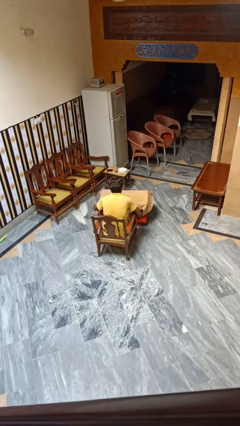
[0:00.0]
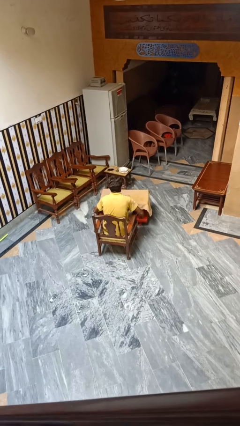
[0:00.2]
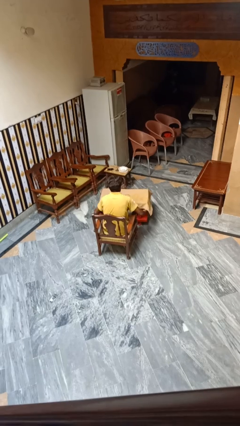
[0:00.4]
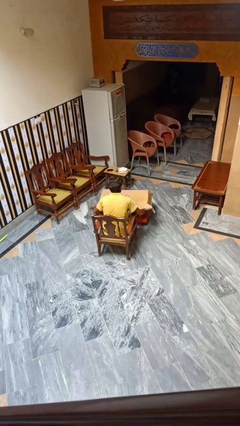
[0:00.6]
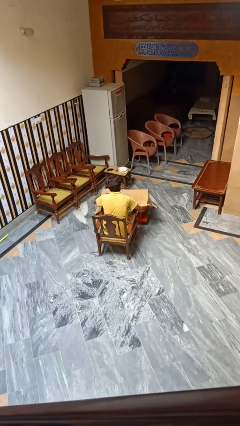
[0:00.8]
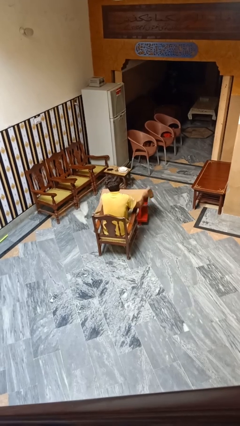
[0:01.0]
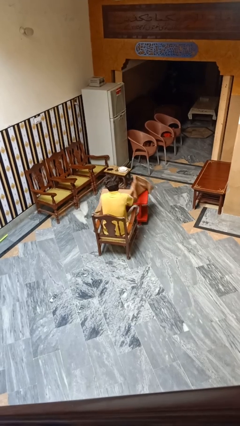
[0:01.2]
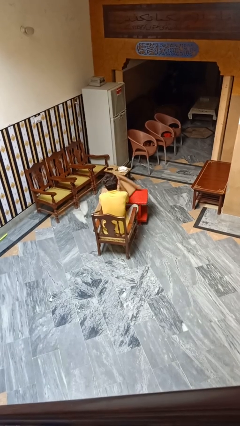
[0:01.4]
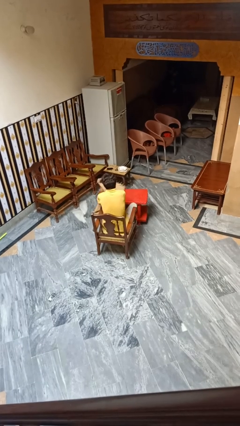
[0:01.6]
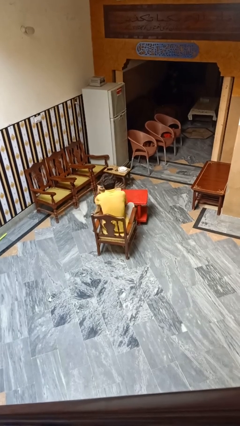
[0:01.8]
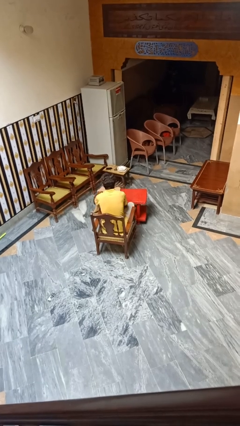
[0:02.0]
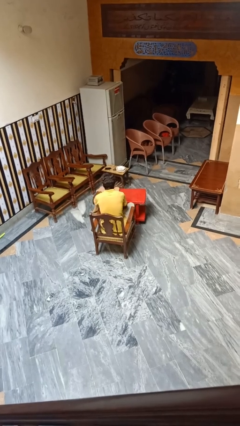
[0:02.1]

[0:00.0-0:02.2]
person folds tablecloth

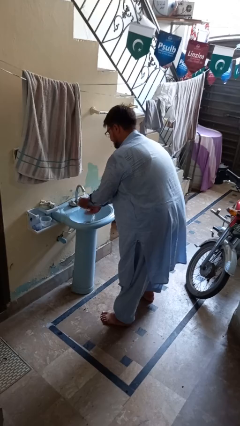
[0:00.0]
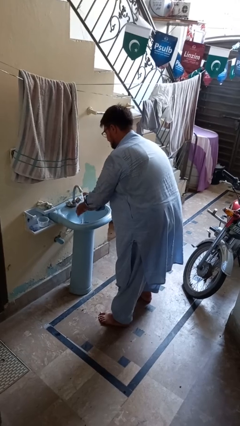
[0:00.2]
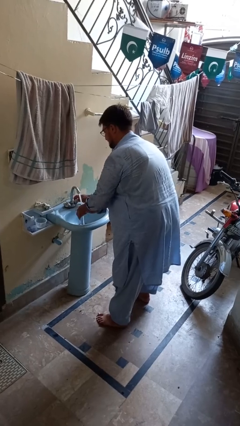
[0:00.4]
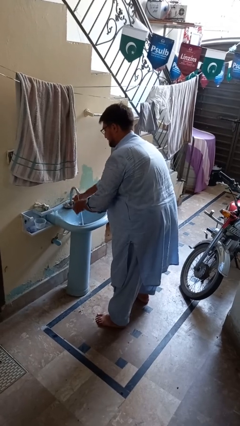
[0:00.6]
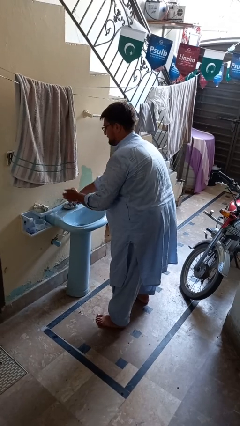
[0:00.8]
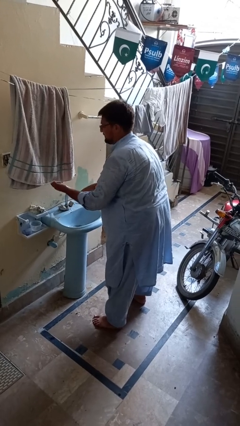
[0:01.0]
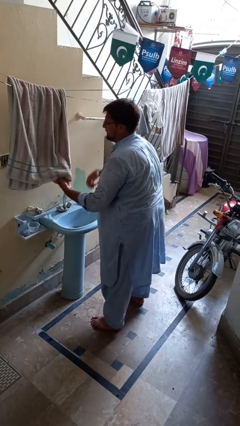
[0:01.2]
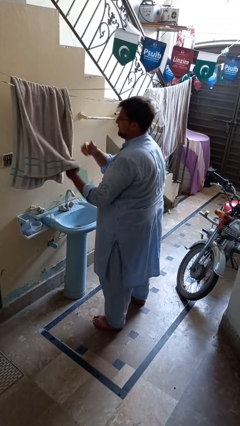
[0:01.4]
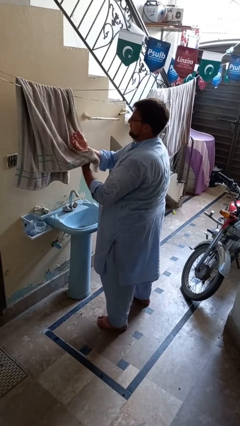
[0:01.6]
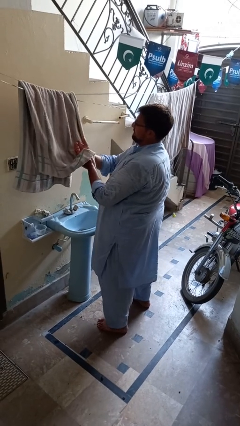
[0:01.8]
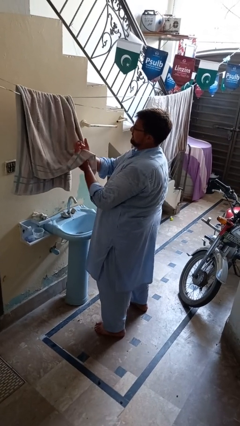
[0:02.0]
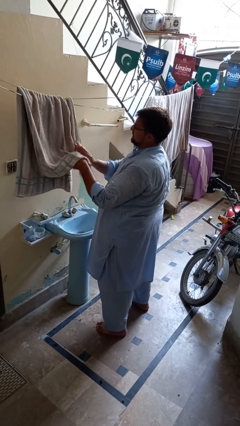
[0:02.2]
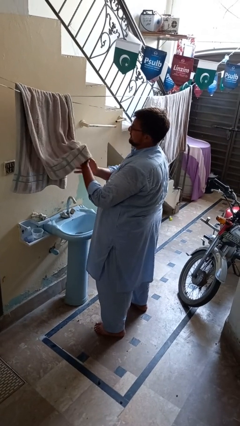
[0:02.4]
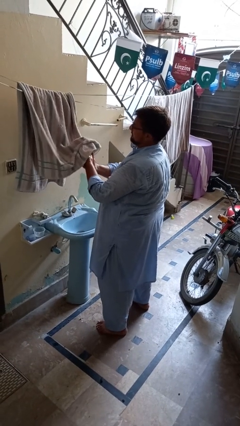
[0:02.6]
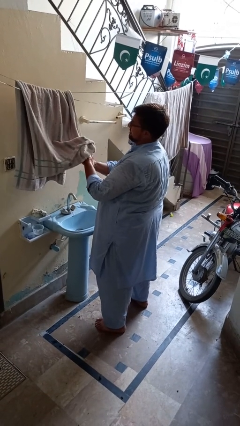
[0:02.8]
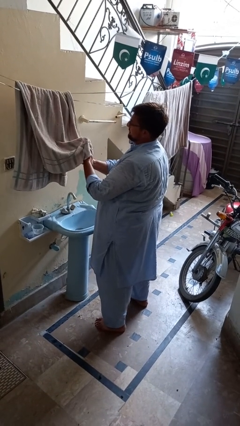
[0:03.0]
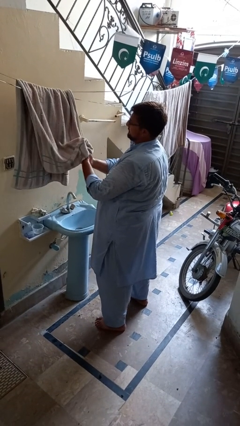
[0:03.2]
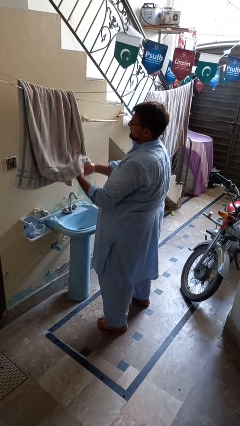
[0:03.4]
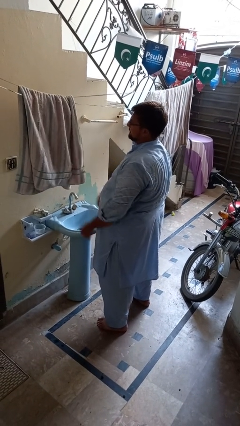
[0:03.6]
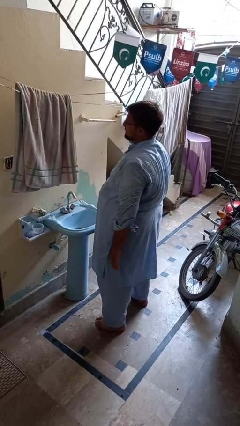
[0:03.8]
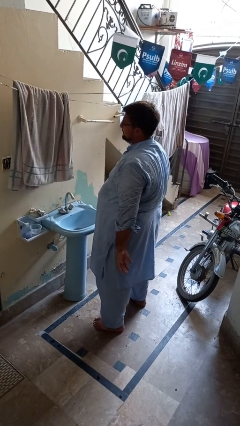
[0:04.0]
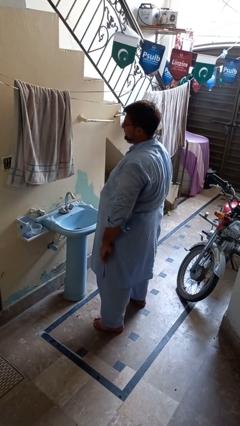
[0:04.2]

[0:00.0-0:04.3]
person dries hands with towel

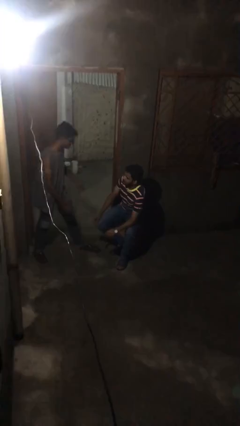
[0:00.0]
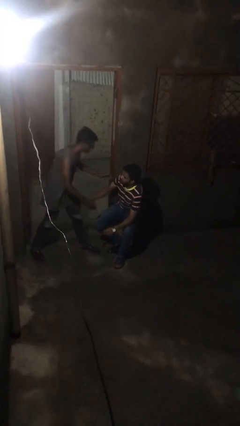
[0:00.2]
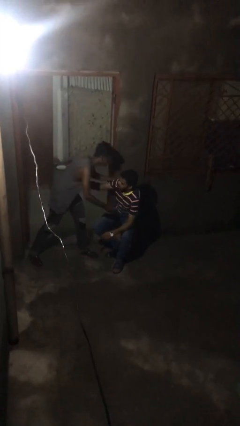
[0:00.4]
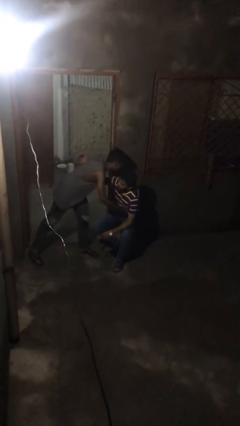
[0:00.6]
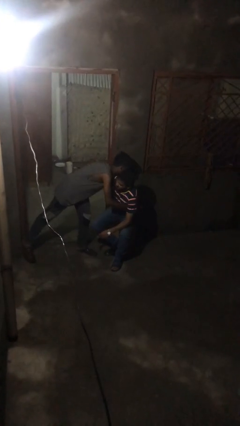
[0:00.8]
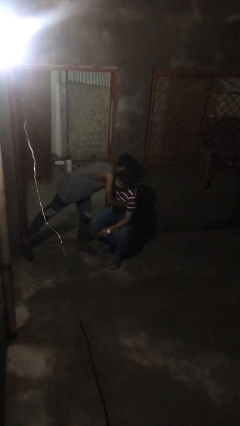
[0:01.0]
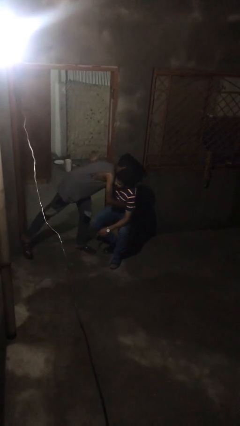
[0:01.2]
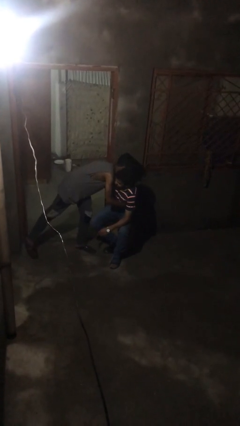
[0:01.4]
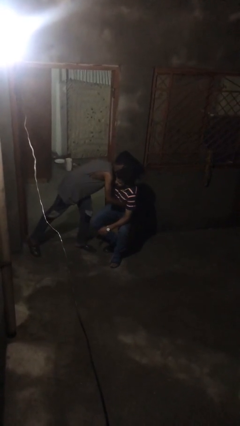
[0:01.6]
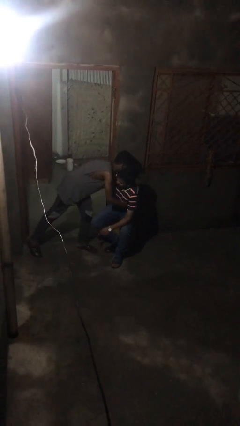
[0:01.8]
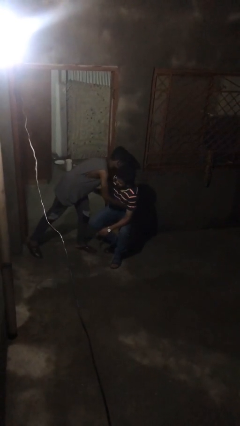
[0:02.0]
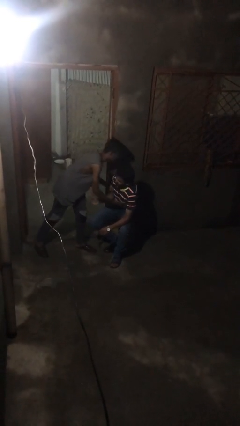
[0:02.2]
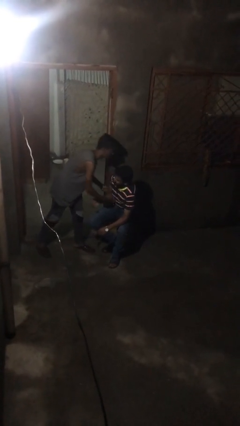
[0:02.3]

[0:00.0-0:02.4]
person embraces person

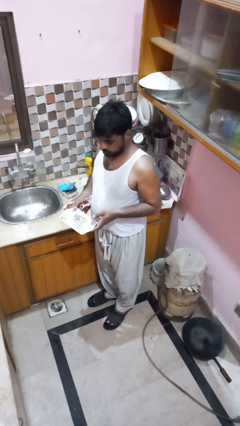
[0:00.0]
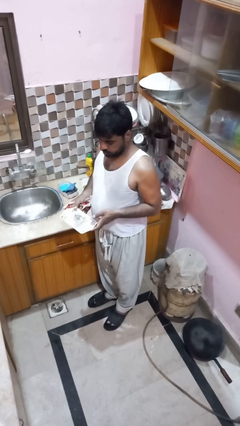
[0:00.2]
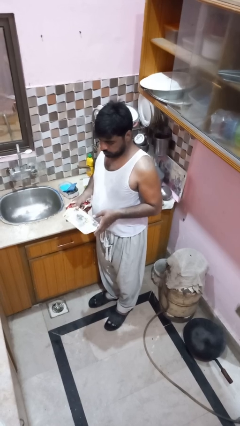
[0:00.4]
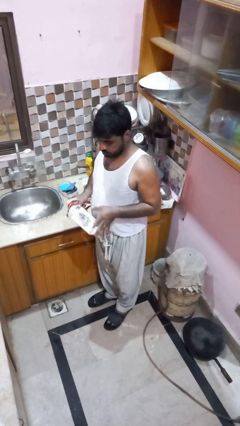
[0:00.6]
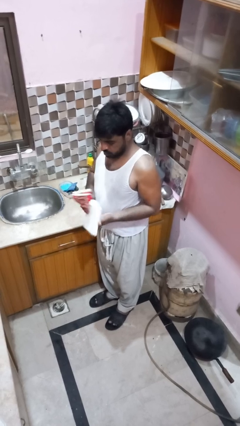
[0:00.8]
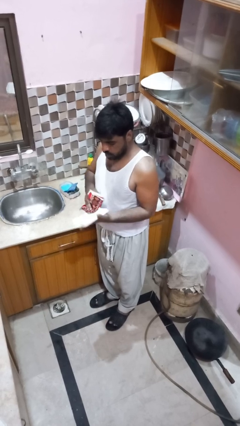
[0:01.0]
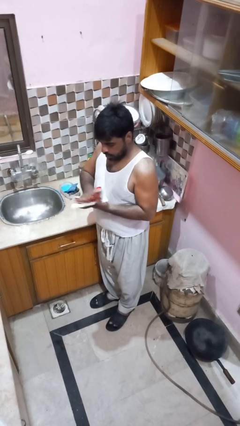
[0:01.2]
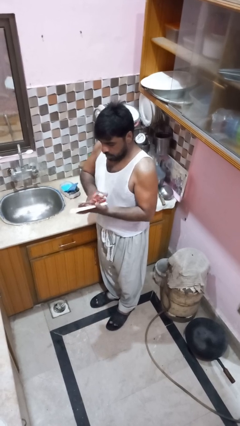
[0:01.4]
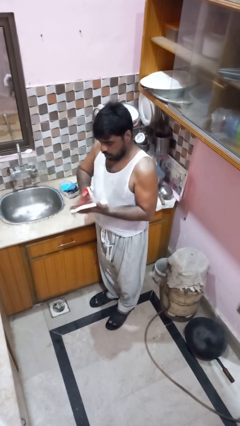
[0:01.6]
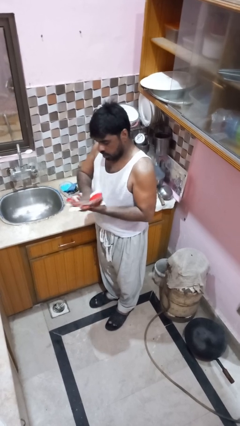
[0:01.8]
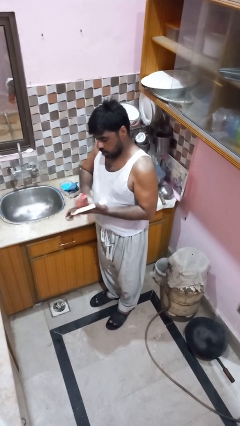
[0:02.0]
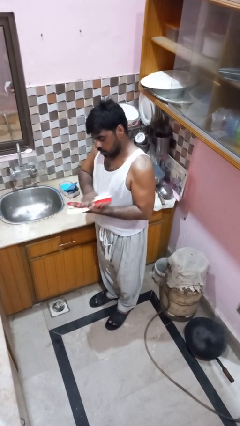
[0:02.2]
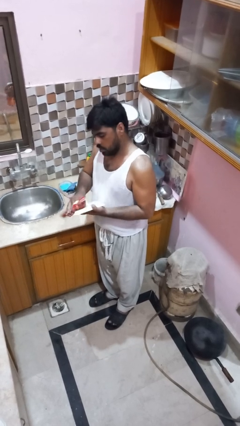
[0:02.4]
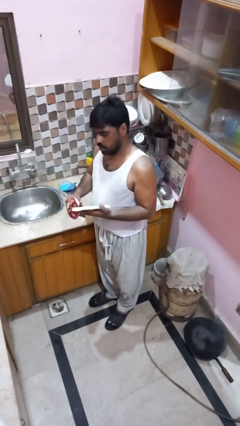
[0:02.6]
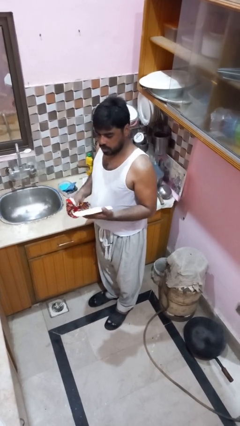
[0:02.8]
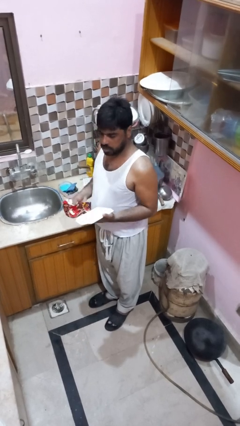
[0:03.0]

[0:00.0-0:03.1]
person dries dish

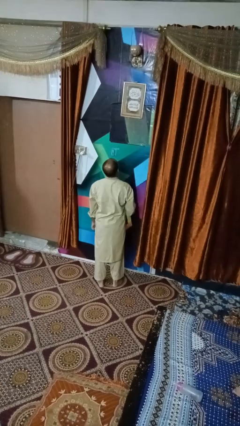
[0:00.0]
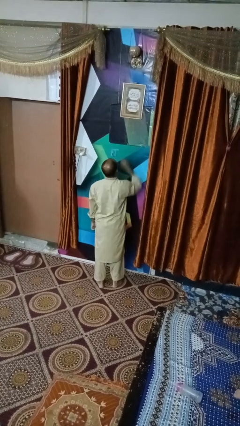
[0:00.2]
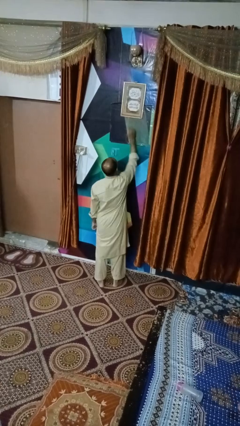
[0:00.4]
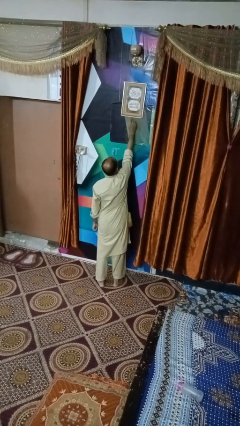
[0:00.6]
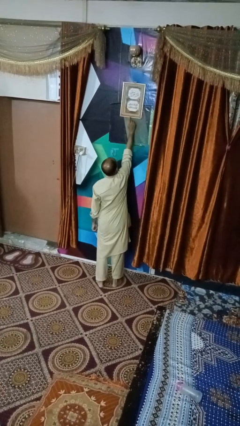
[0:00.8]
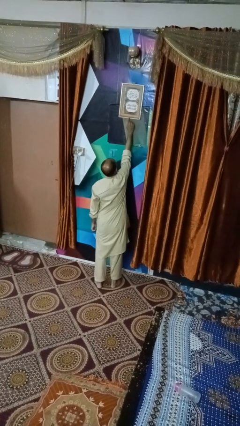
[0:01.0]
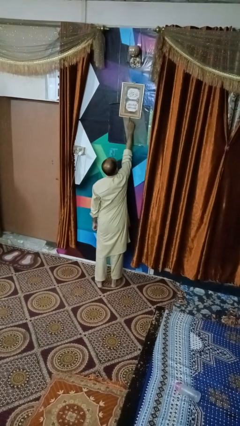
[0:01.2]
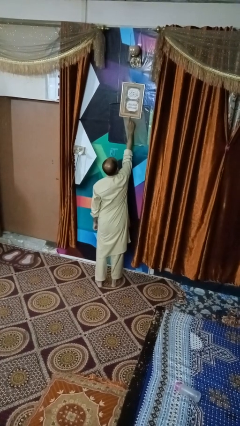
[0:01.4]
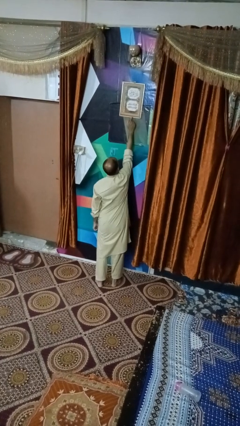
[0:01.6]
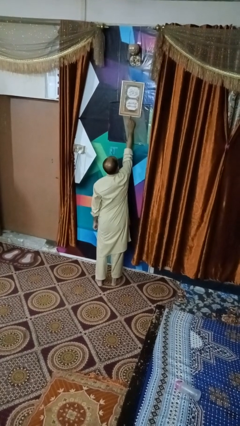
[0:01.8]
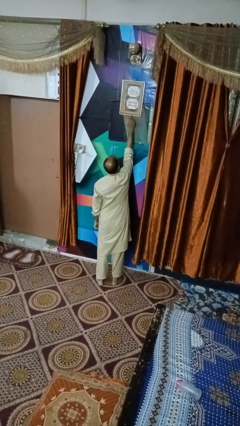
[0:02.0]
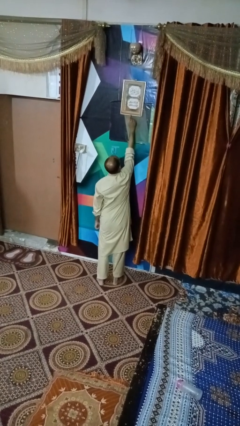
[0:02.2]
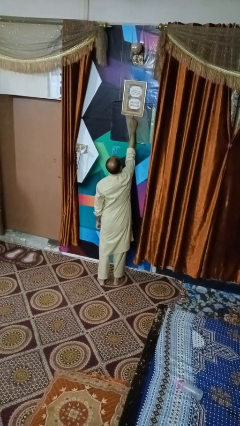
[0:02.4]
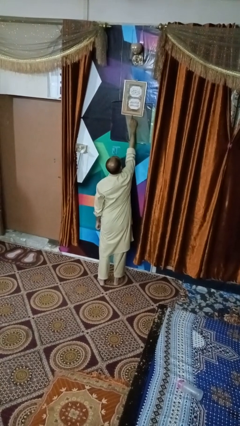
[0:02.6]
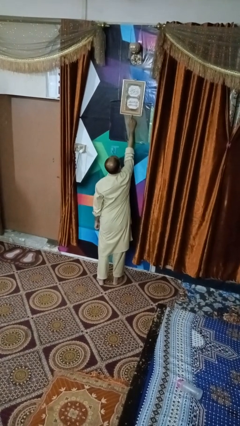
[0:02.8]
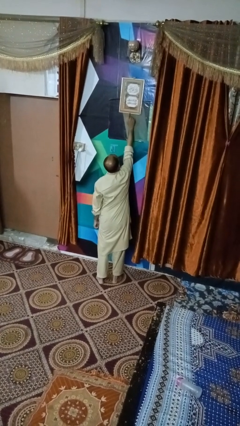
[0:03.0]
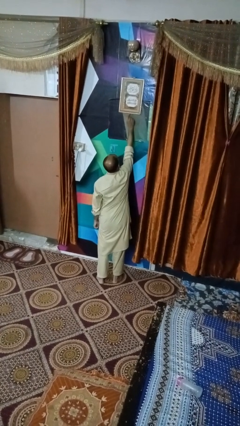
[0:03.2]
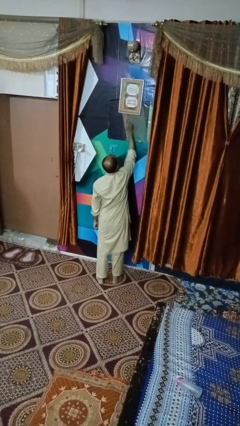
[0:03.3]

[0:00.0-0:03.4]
person taps object with finger

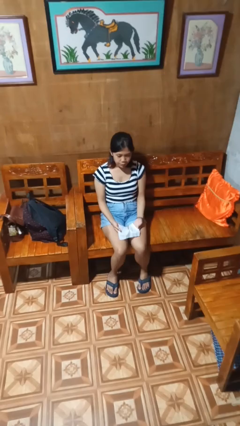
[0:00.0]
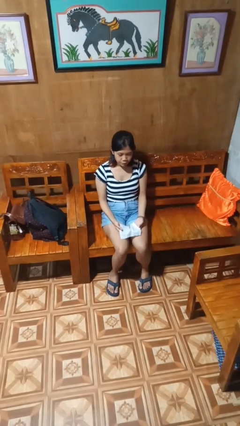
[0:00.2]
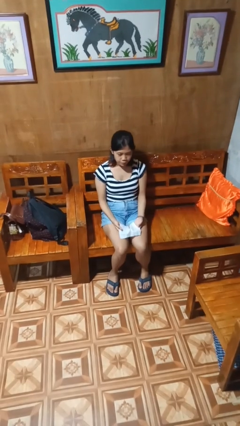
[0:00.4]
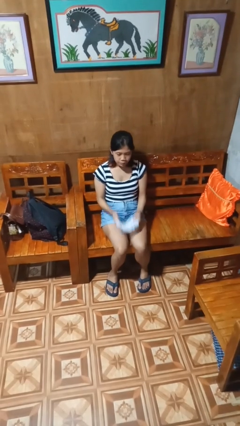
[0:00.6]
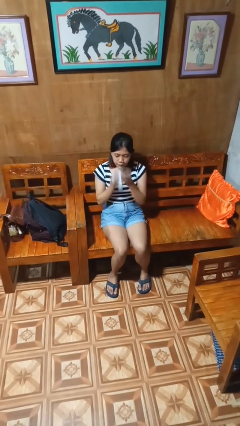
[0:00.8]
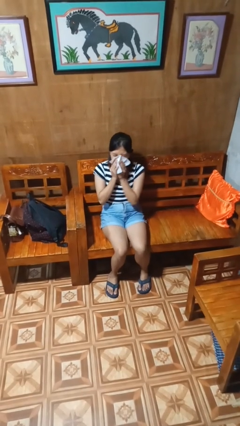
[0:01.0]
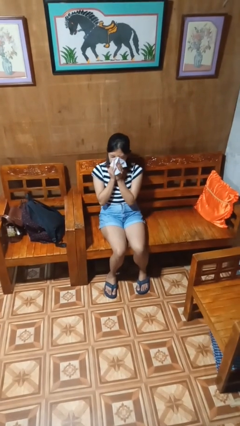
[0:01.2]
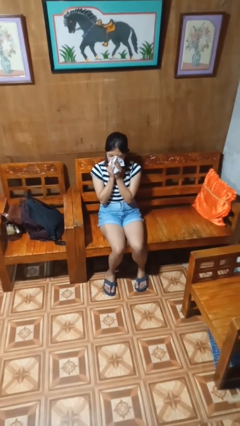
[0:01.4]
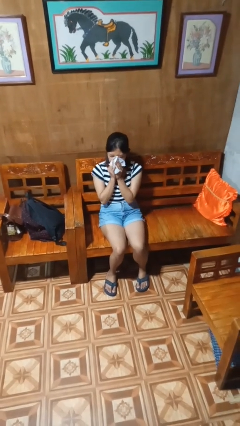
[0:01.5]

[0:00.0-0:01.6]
person blows nose

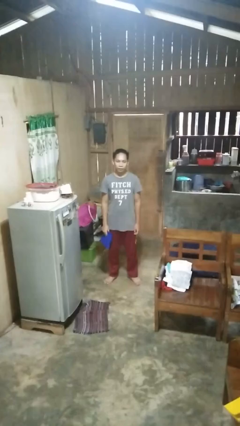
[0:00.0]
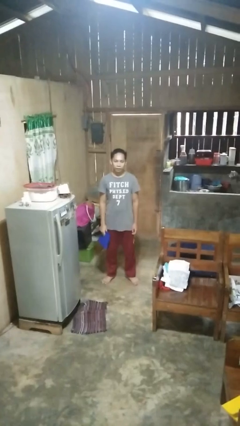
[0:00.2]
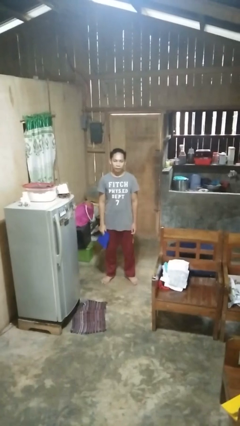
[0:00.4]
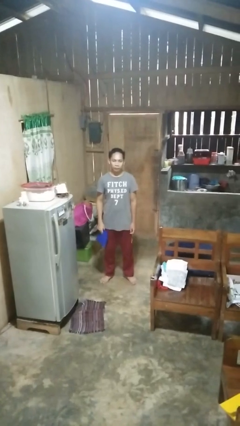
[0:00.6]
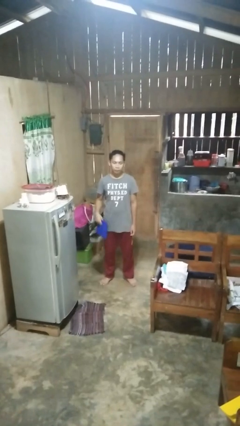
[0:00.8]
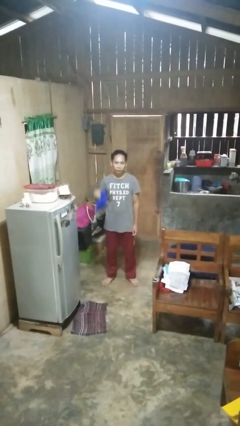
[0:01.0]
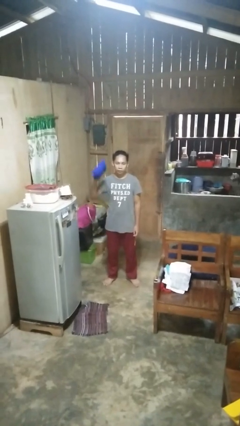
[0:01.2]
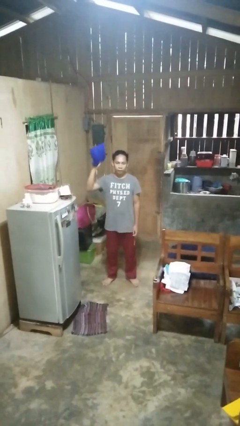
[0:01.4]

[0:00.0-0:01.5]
person holds object above head
